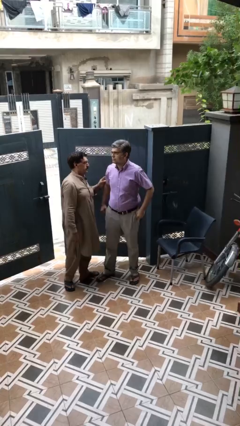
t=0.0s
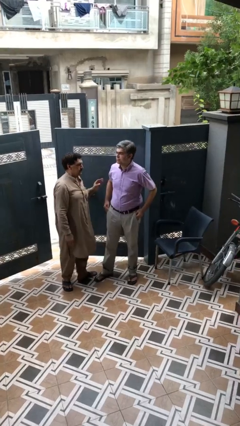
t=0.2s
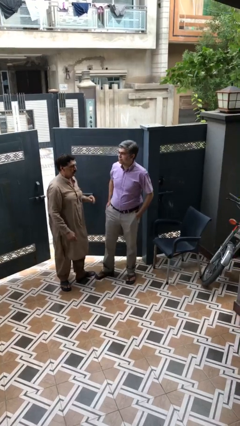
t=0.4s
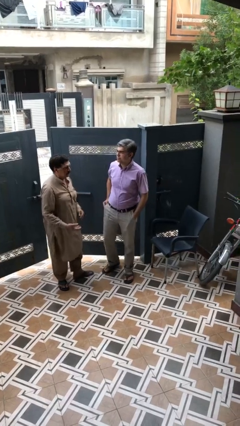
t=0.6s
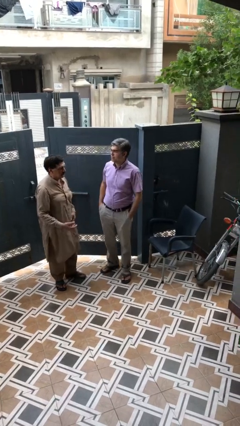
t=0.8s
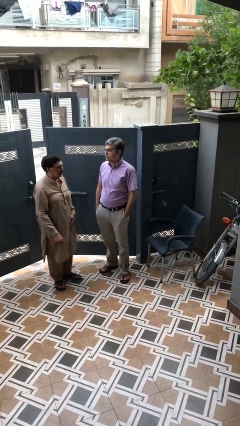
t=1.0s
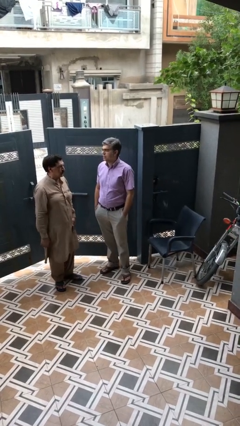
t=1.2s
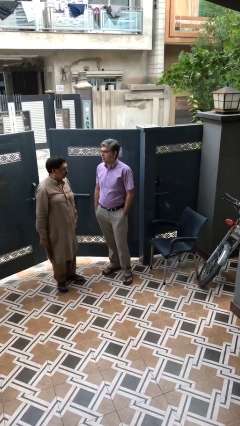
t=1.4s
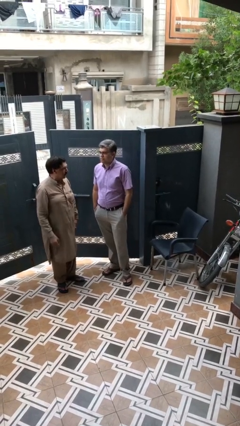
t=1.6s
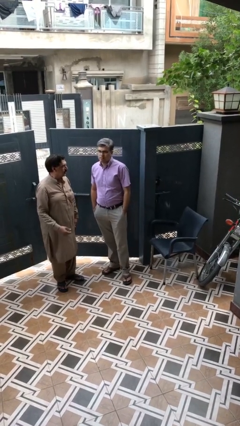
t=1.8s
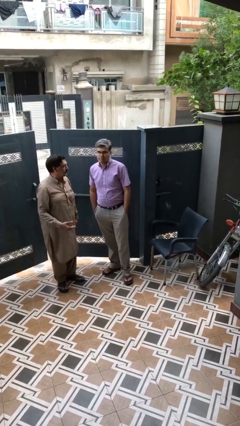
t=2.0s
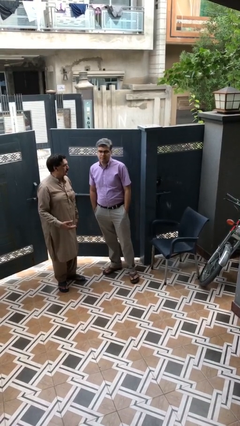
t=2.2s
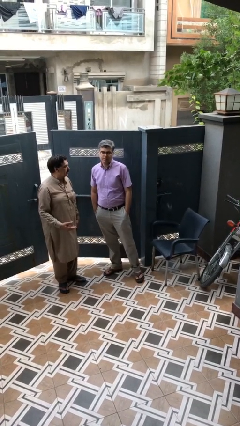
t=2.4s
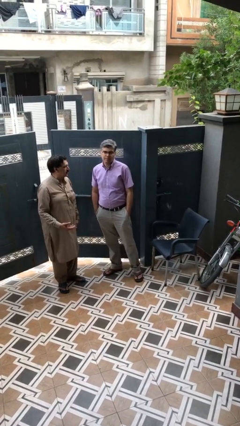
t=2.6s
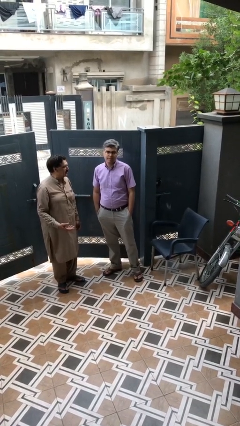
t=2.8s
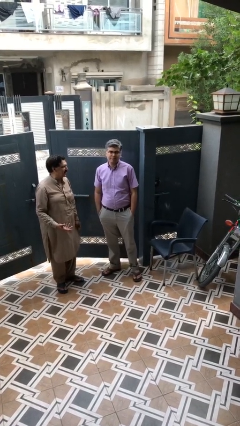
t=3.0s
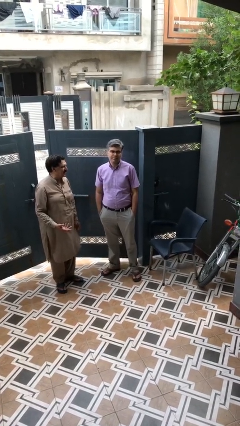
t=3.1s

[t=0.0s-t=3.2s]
person talks to person

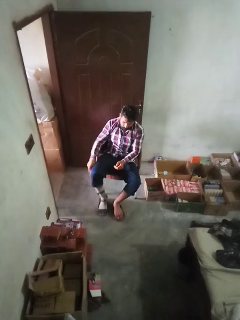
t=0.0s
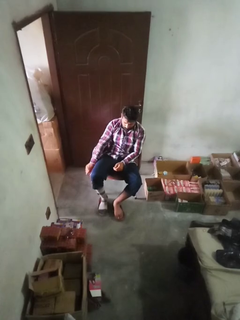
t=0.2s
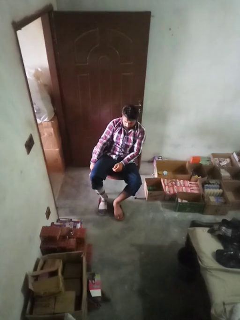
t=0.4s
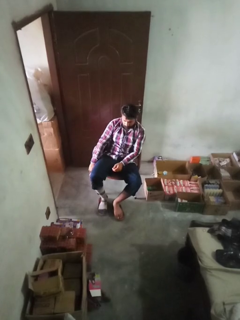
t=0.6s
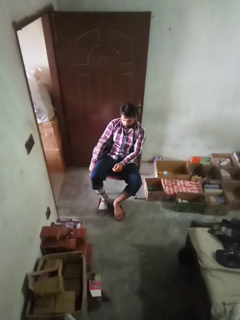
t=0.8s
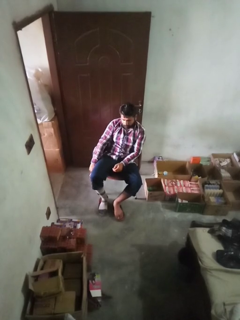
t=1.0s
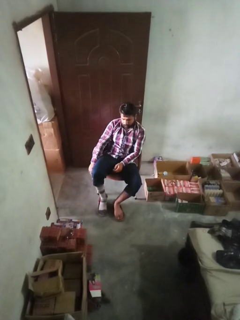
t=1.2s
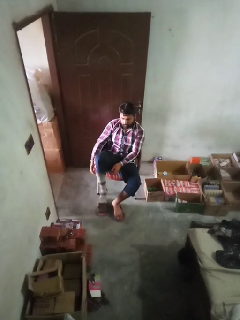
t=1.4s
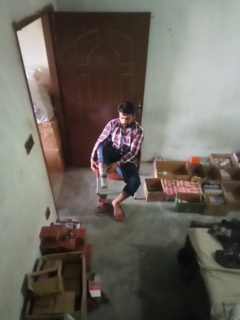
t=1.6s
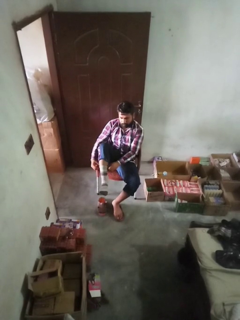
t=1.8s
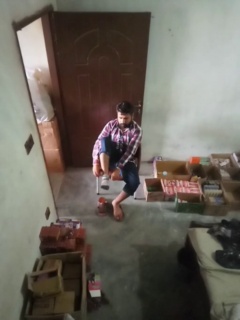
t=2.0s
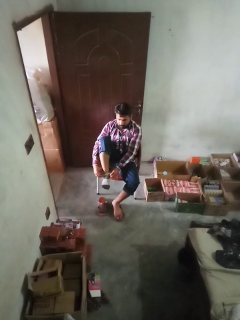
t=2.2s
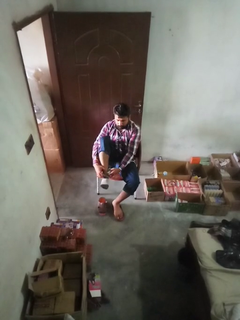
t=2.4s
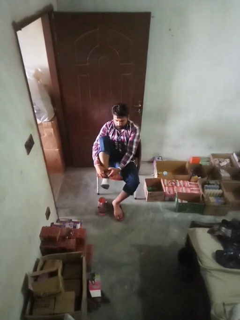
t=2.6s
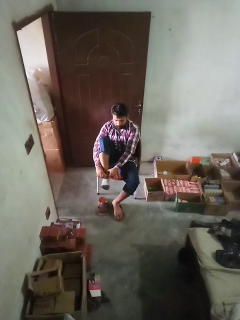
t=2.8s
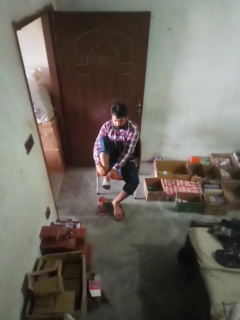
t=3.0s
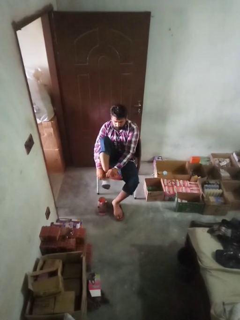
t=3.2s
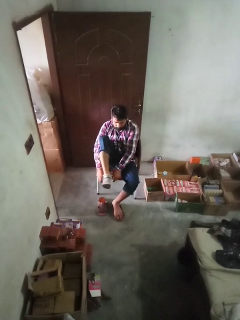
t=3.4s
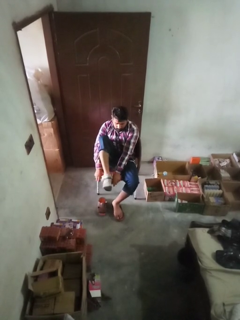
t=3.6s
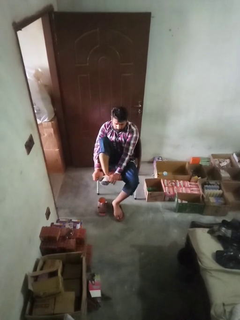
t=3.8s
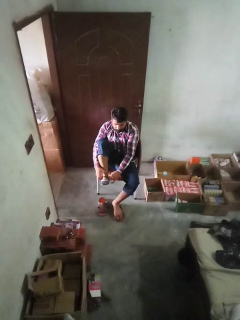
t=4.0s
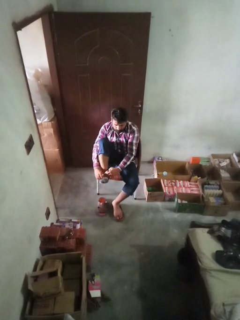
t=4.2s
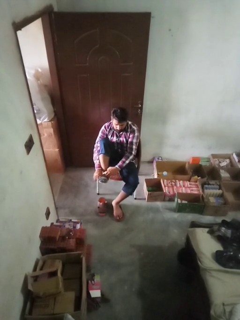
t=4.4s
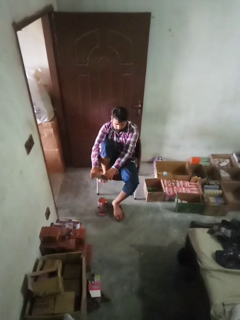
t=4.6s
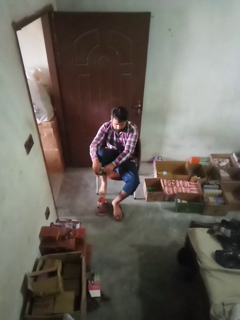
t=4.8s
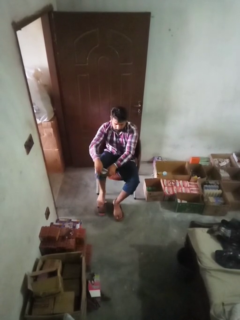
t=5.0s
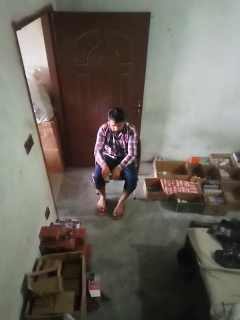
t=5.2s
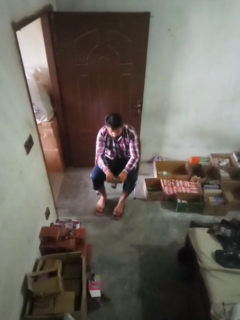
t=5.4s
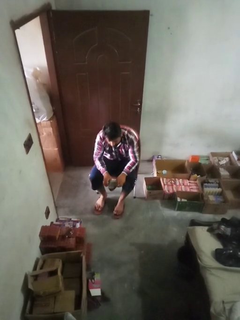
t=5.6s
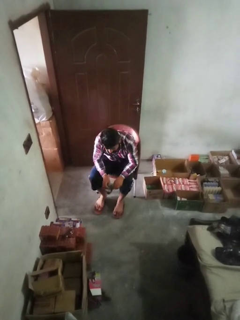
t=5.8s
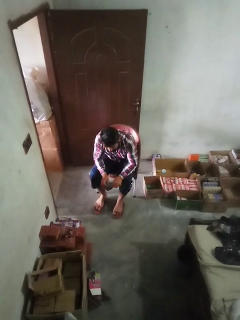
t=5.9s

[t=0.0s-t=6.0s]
person takes off socks

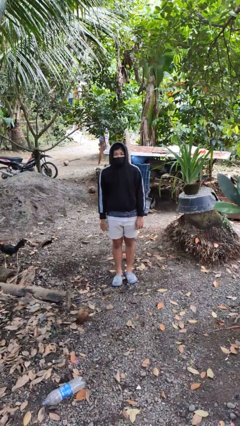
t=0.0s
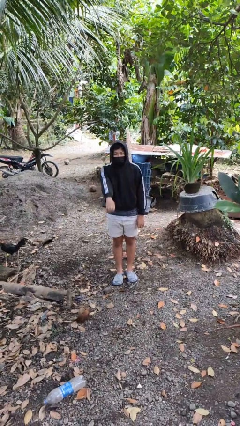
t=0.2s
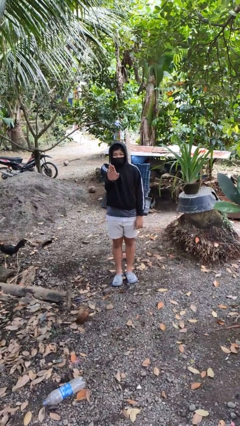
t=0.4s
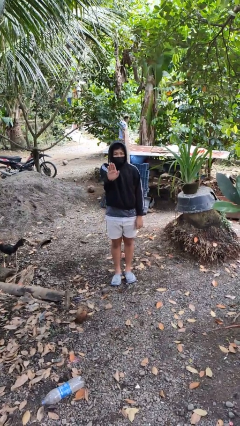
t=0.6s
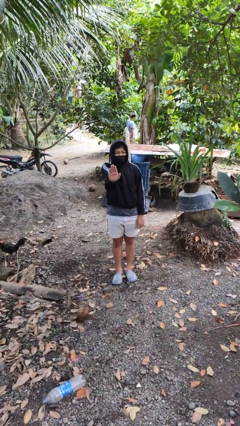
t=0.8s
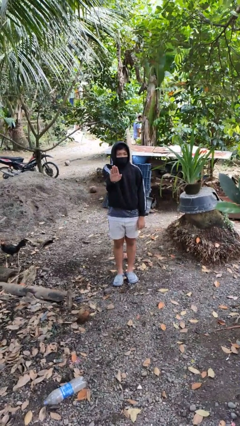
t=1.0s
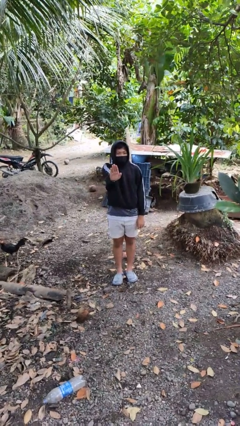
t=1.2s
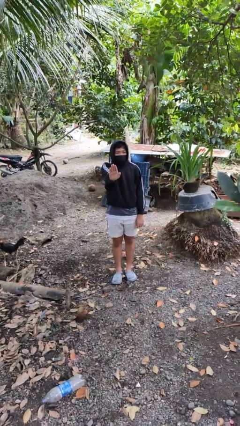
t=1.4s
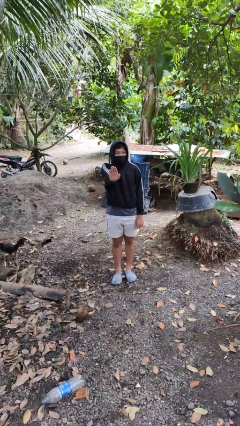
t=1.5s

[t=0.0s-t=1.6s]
person gestures stop

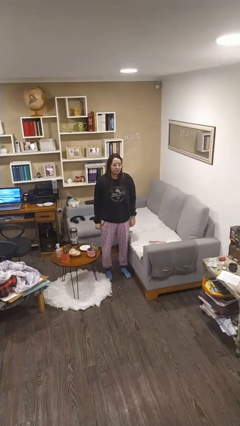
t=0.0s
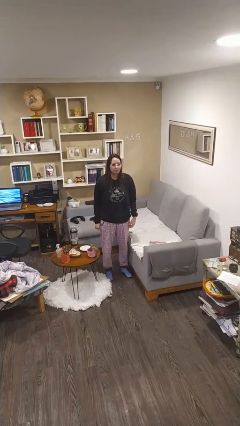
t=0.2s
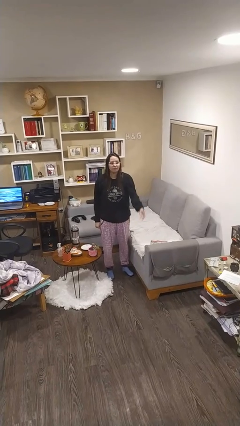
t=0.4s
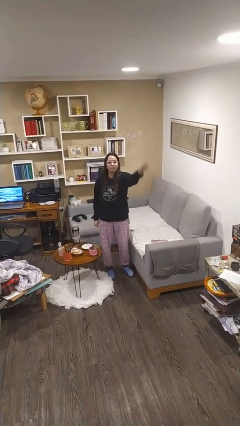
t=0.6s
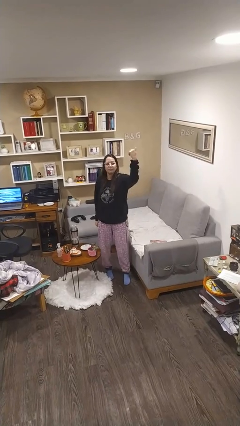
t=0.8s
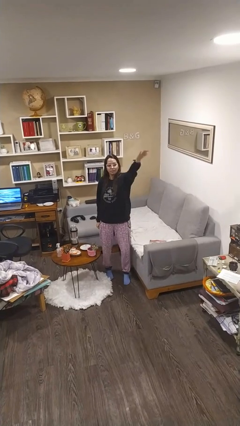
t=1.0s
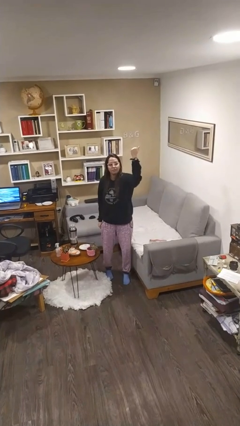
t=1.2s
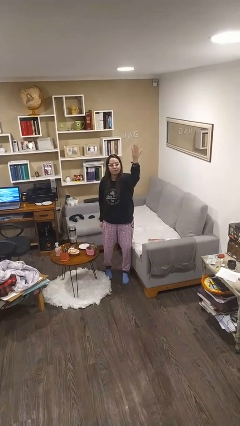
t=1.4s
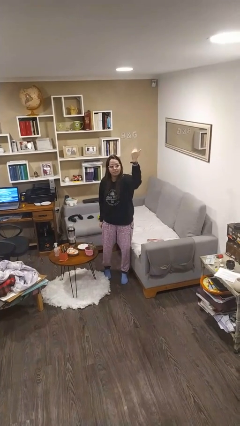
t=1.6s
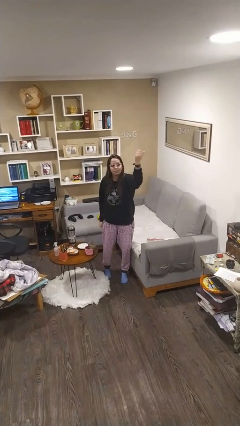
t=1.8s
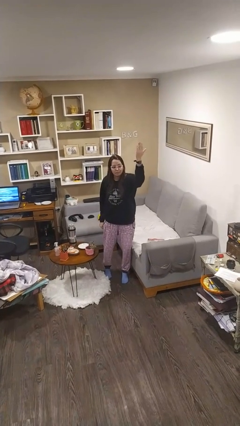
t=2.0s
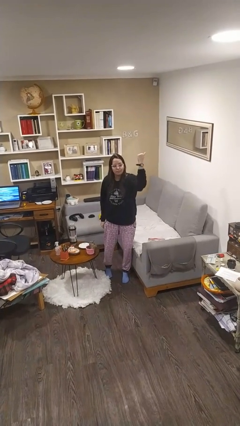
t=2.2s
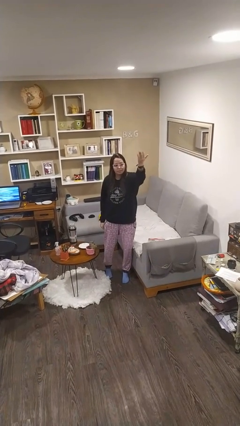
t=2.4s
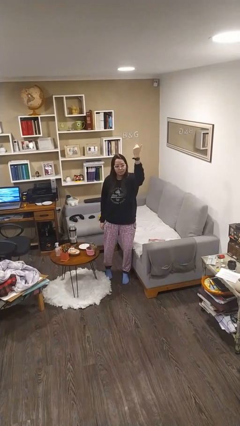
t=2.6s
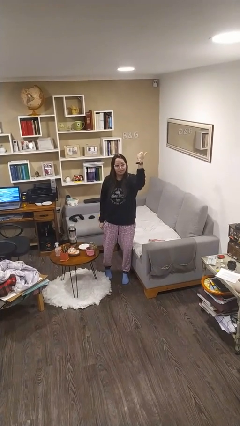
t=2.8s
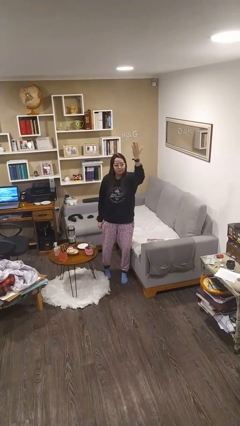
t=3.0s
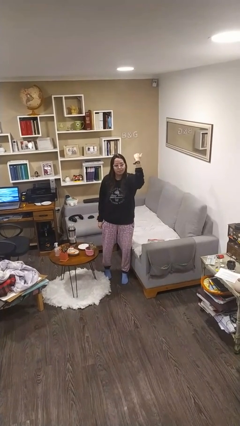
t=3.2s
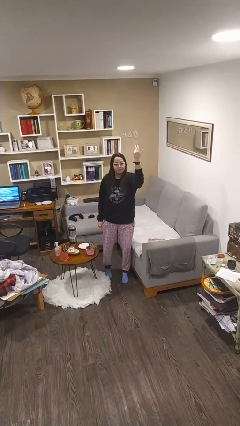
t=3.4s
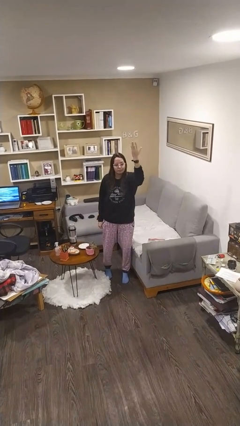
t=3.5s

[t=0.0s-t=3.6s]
person gestures come here

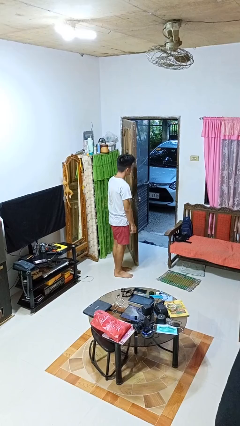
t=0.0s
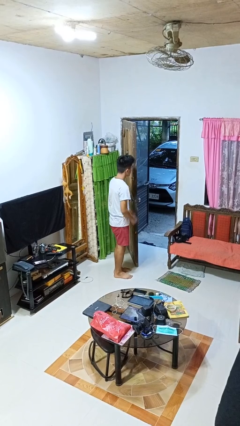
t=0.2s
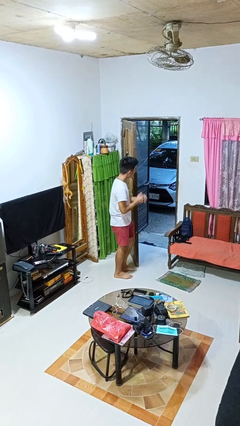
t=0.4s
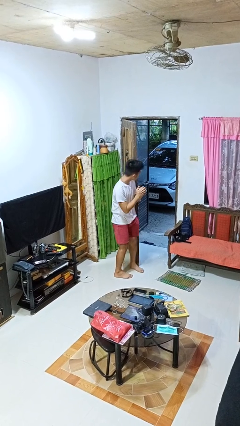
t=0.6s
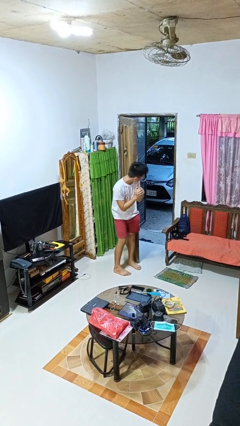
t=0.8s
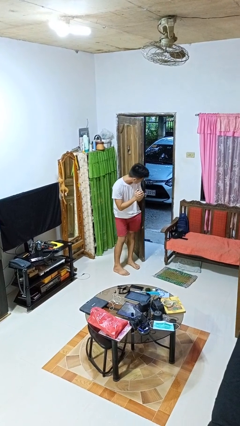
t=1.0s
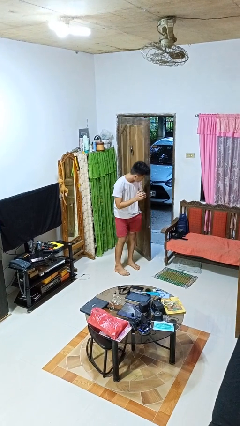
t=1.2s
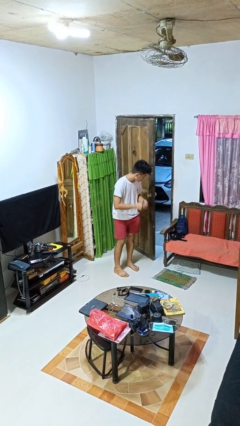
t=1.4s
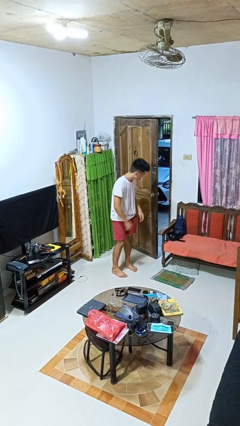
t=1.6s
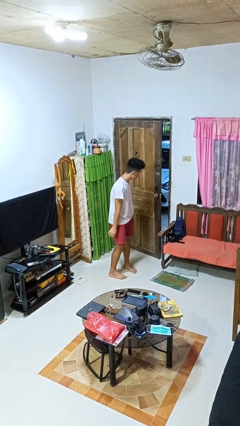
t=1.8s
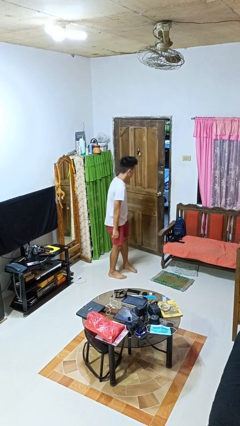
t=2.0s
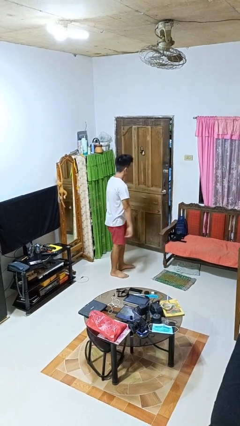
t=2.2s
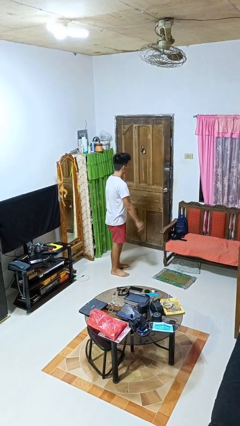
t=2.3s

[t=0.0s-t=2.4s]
person closes door with hip

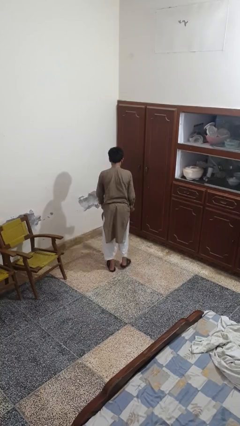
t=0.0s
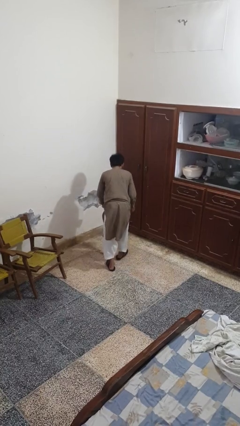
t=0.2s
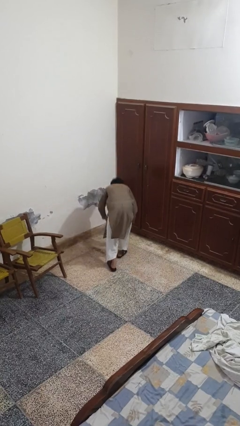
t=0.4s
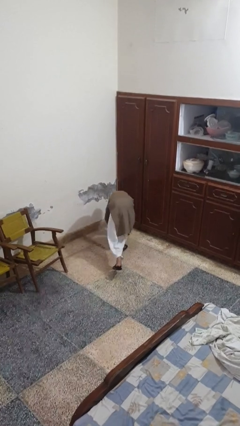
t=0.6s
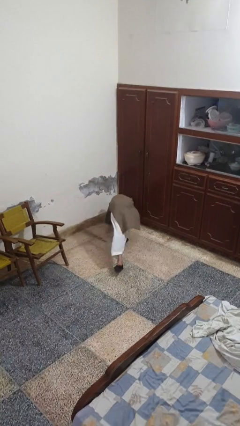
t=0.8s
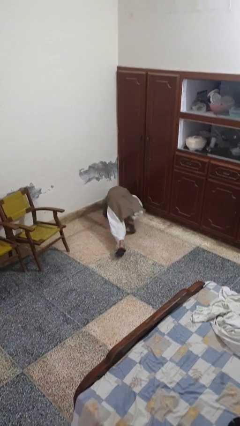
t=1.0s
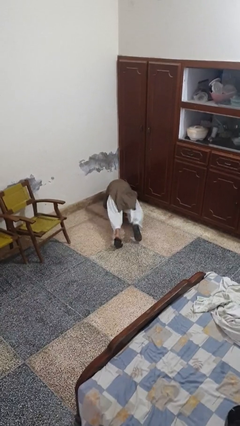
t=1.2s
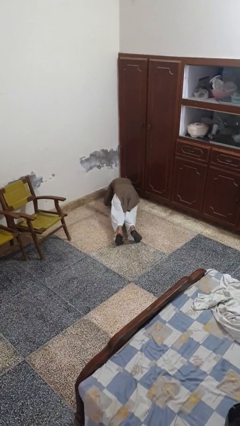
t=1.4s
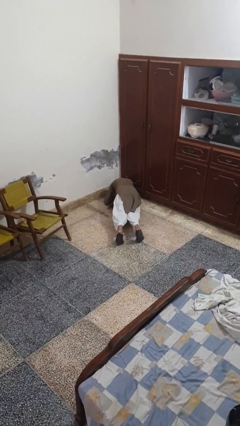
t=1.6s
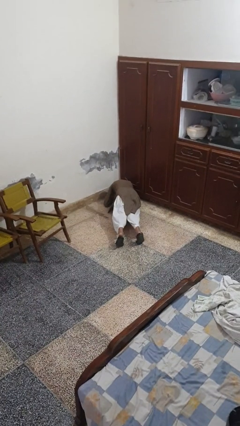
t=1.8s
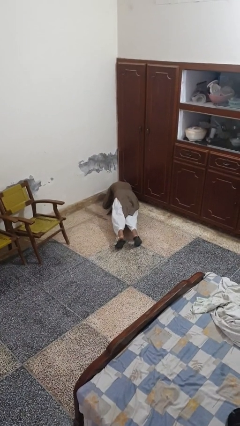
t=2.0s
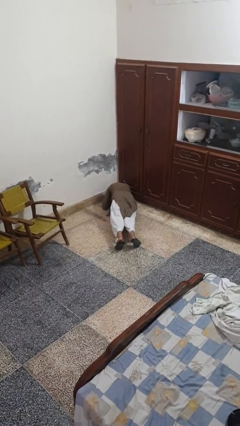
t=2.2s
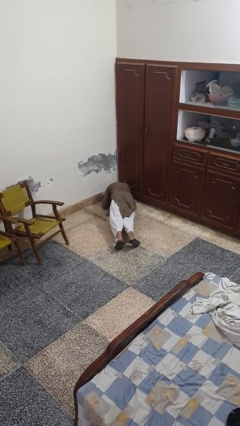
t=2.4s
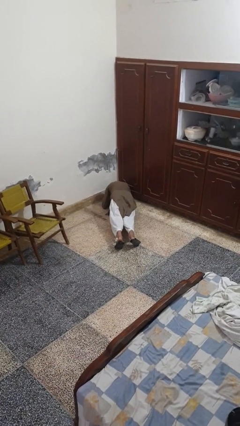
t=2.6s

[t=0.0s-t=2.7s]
person exercises with plank
